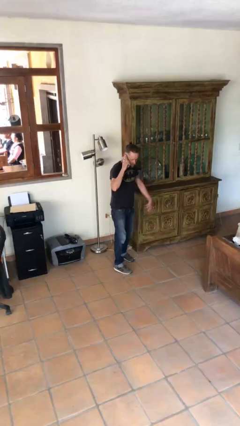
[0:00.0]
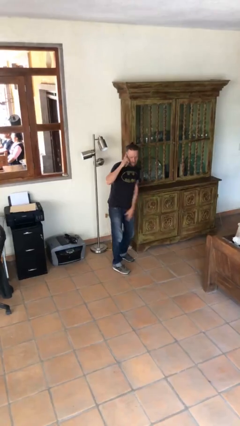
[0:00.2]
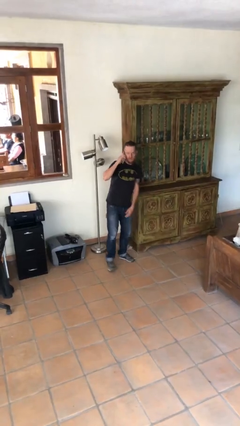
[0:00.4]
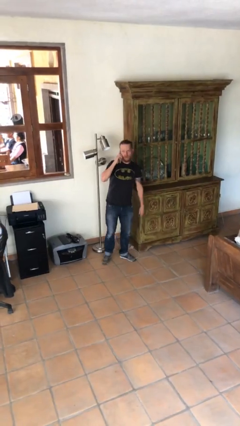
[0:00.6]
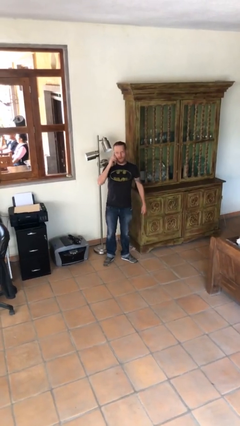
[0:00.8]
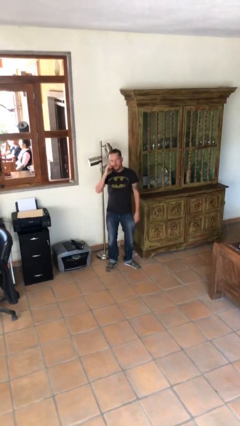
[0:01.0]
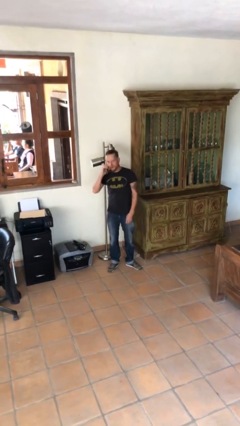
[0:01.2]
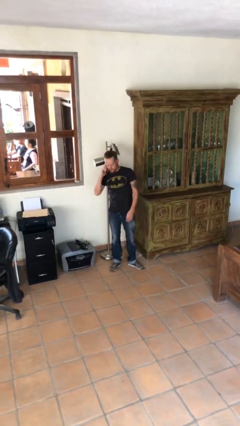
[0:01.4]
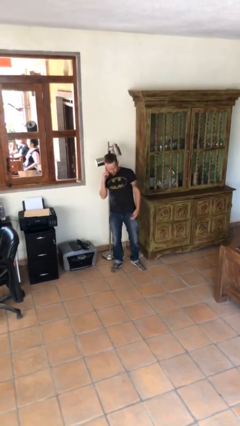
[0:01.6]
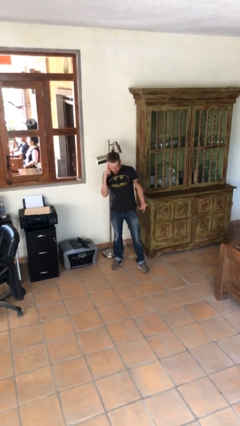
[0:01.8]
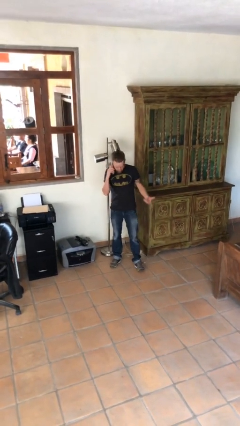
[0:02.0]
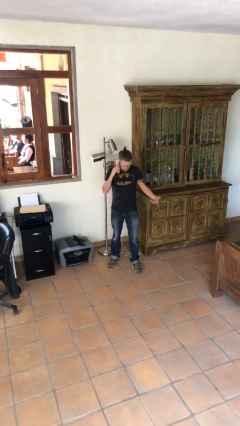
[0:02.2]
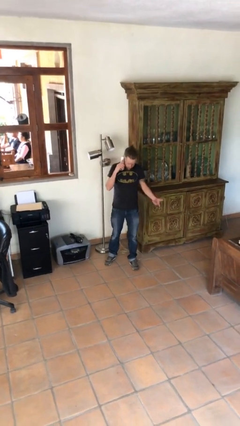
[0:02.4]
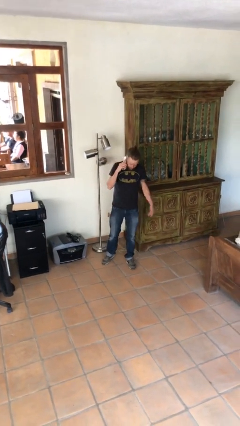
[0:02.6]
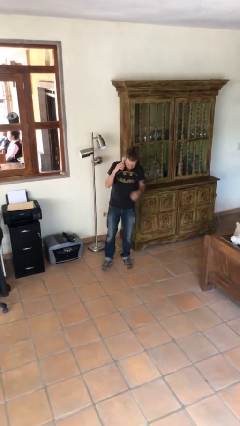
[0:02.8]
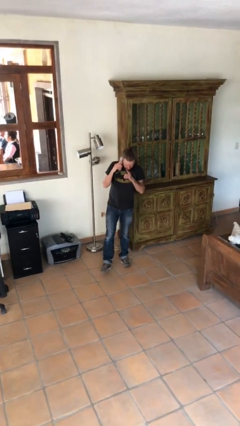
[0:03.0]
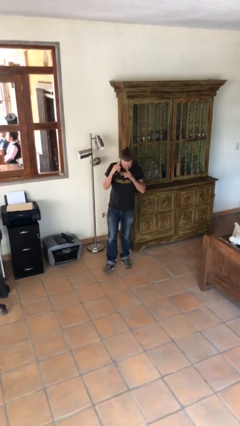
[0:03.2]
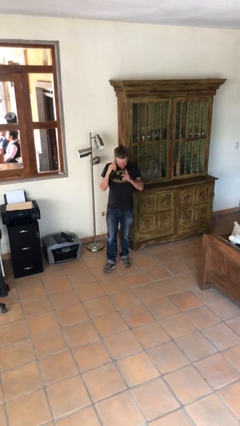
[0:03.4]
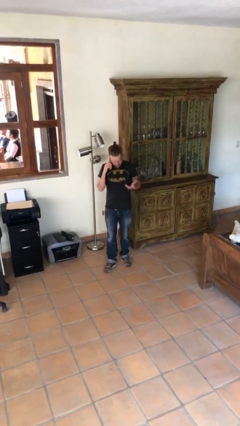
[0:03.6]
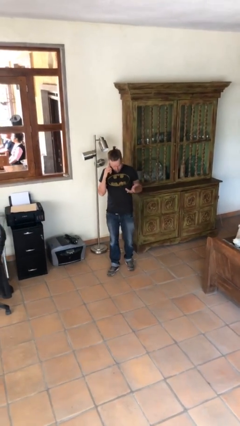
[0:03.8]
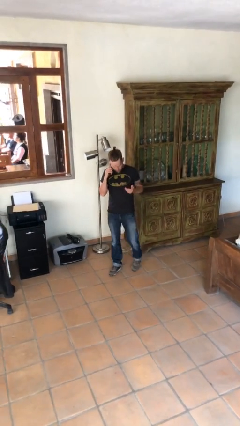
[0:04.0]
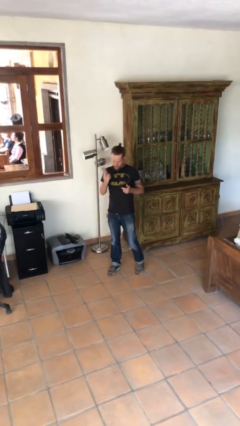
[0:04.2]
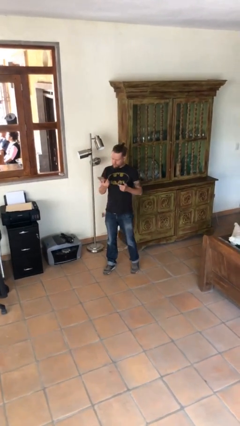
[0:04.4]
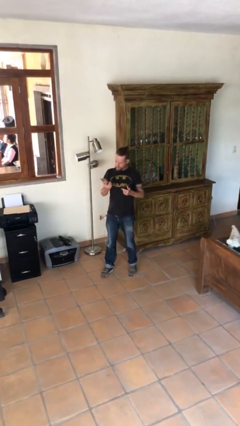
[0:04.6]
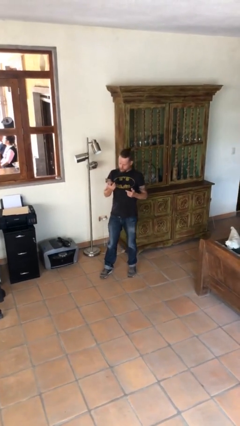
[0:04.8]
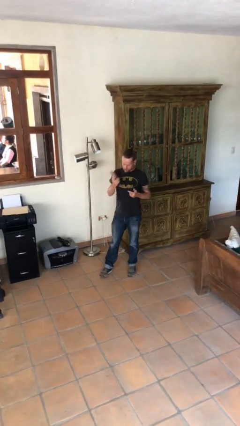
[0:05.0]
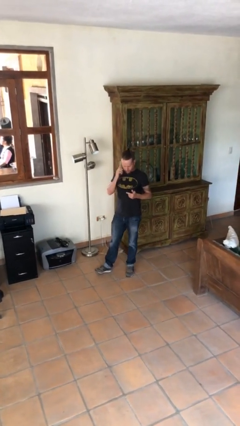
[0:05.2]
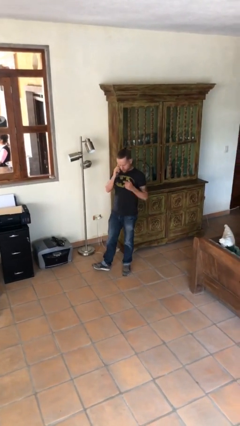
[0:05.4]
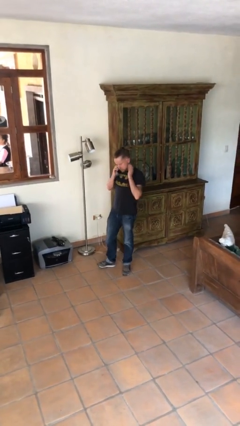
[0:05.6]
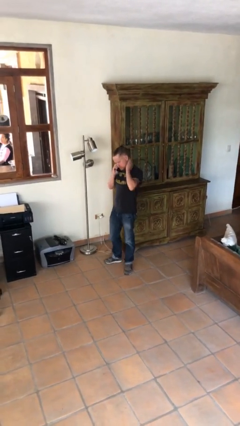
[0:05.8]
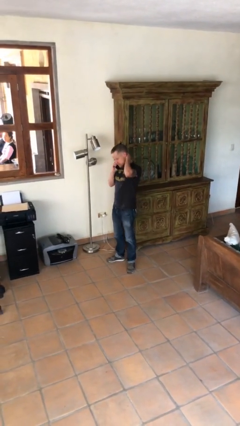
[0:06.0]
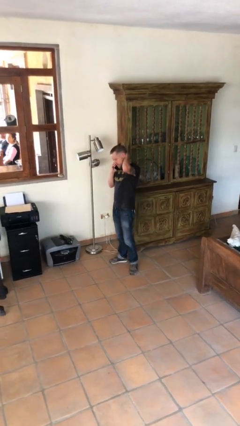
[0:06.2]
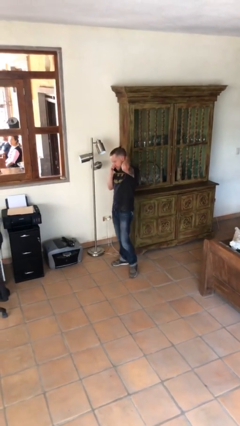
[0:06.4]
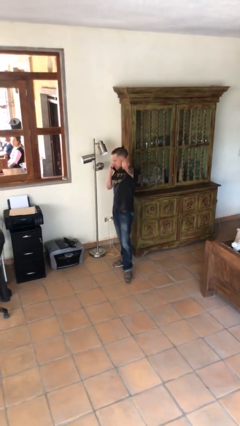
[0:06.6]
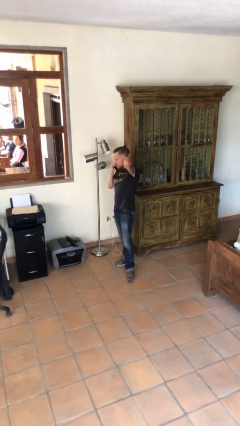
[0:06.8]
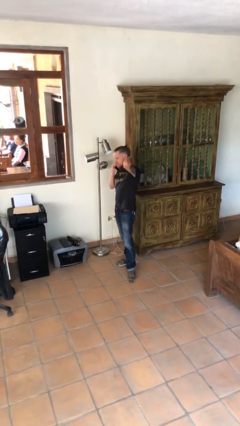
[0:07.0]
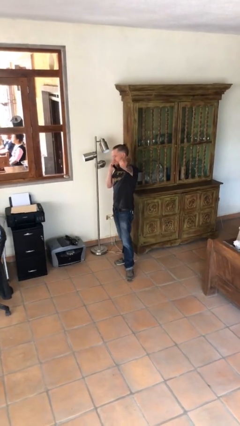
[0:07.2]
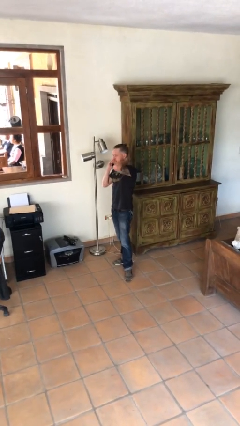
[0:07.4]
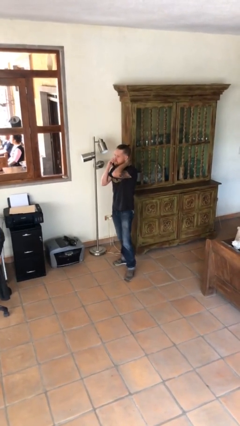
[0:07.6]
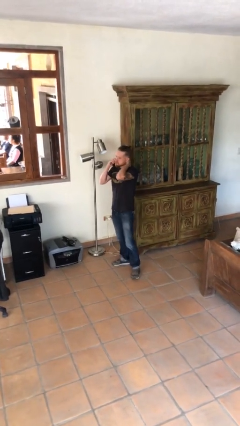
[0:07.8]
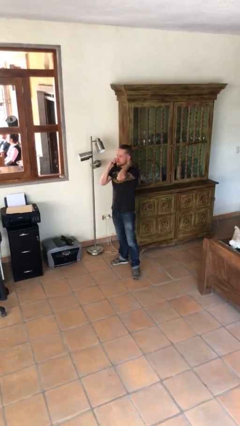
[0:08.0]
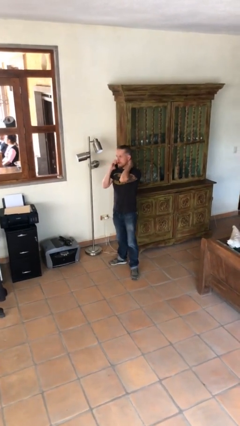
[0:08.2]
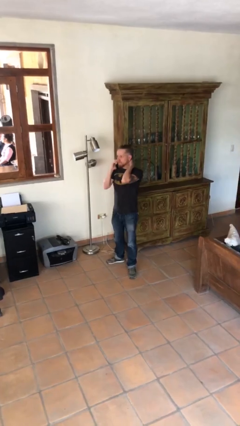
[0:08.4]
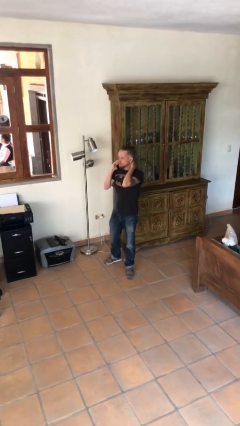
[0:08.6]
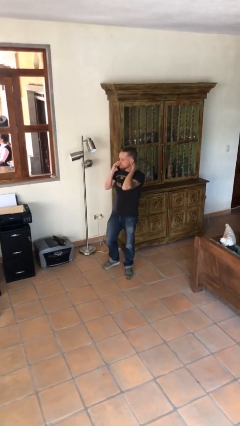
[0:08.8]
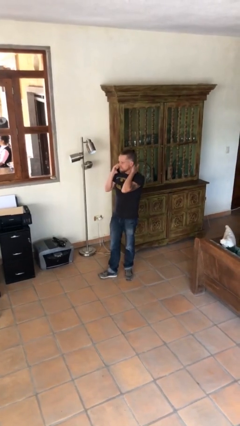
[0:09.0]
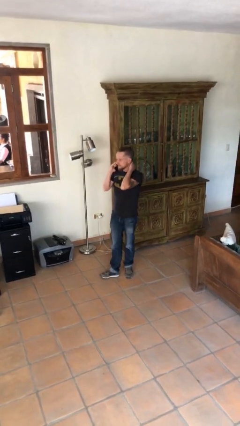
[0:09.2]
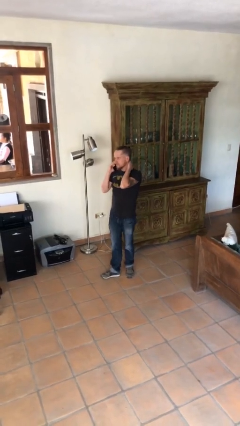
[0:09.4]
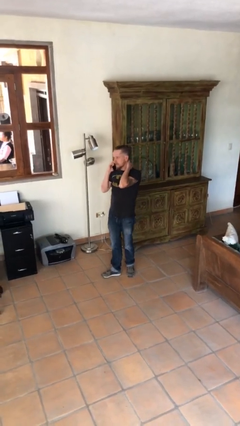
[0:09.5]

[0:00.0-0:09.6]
person talks on phone

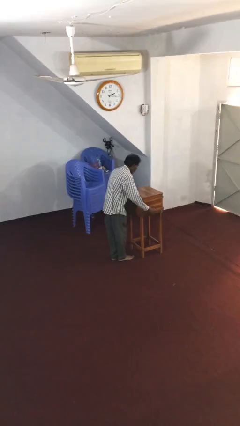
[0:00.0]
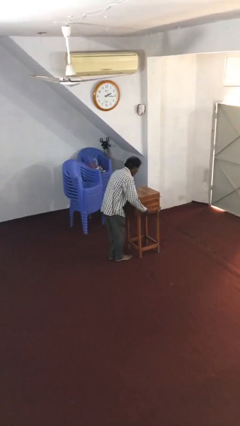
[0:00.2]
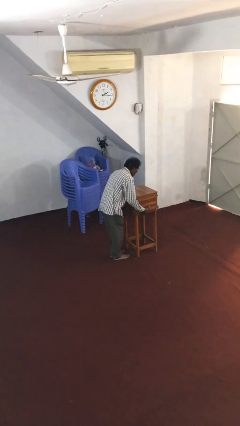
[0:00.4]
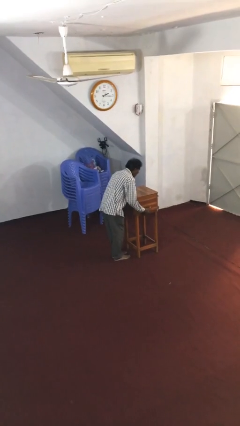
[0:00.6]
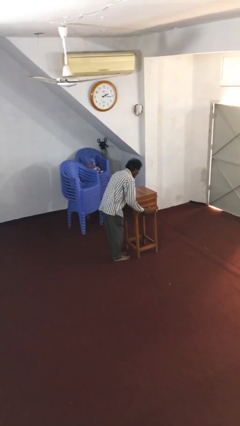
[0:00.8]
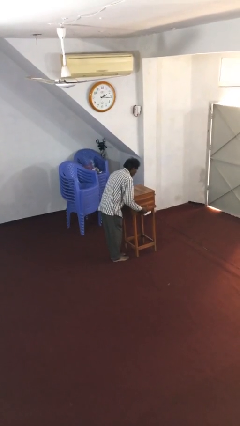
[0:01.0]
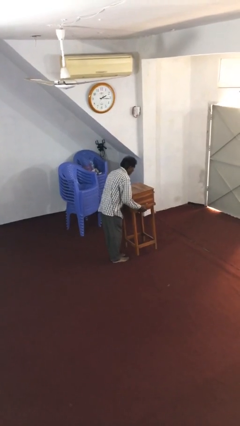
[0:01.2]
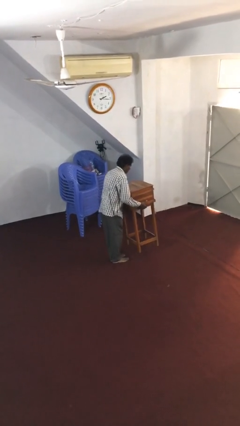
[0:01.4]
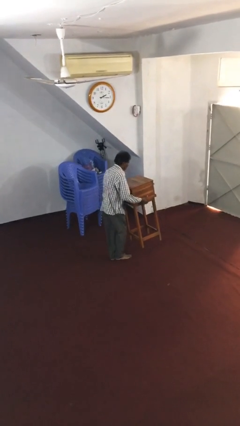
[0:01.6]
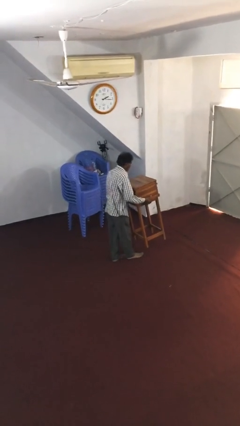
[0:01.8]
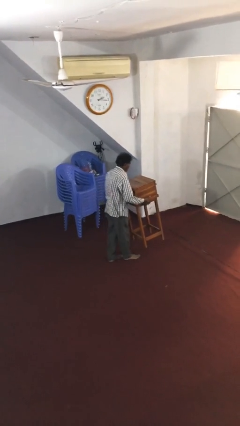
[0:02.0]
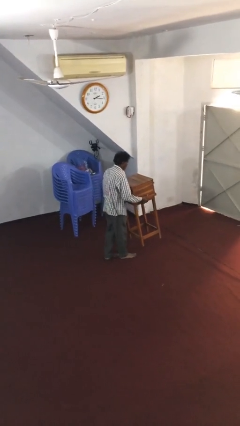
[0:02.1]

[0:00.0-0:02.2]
person picks up object from floor

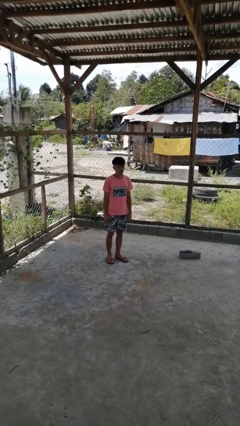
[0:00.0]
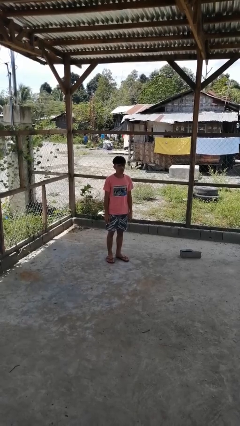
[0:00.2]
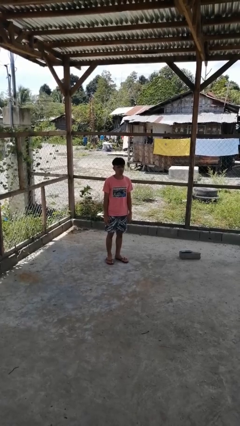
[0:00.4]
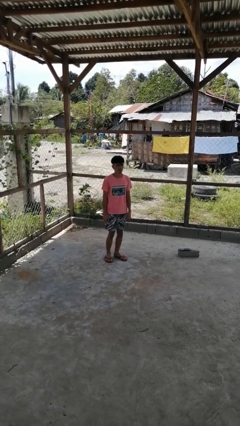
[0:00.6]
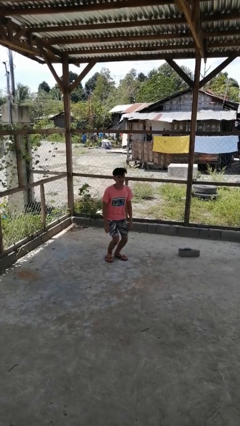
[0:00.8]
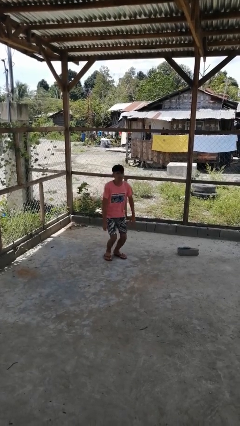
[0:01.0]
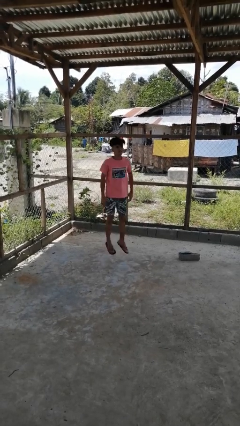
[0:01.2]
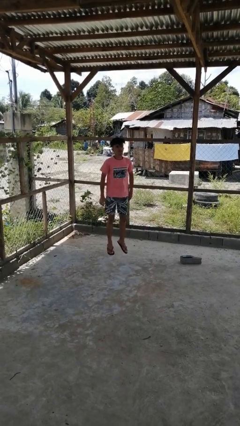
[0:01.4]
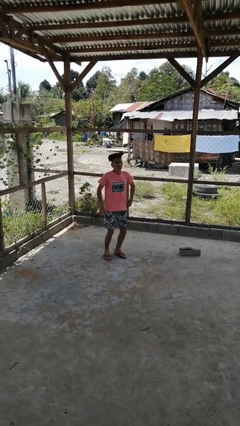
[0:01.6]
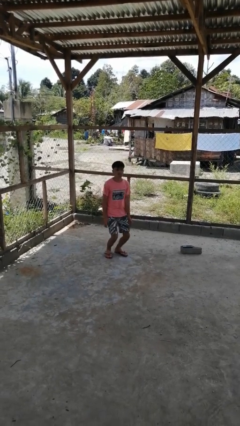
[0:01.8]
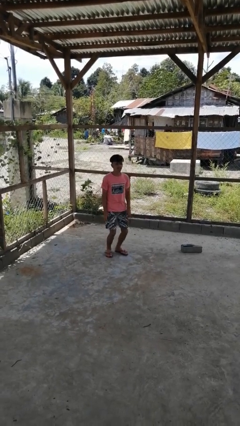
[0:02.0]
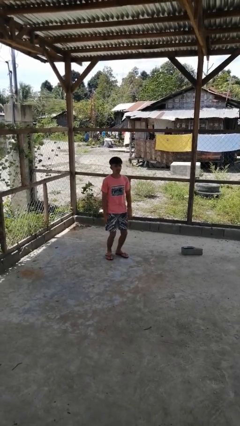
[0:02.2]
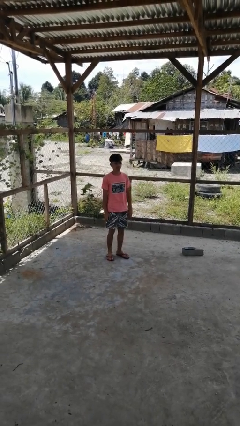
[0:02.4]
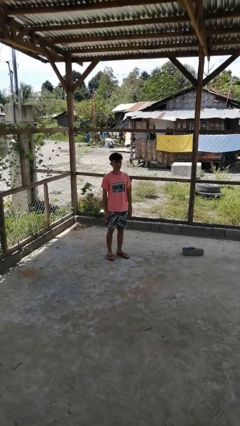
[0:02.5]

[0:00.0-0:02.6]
person jumps

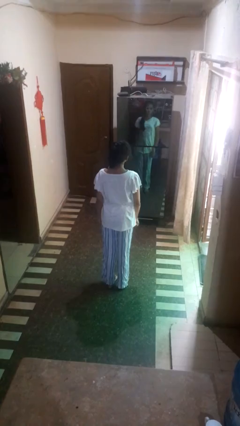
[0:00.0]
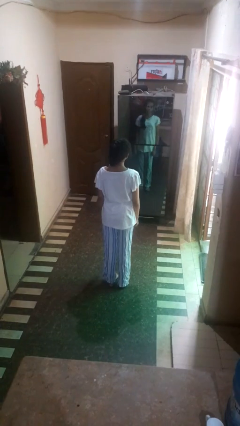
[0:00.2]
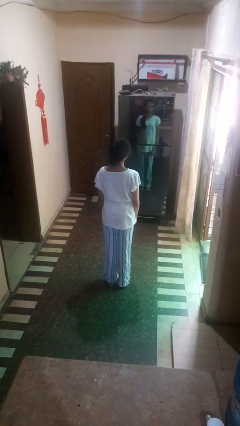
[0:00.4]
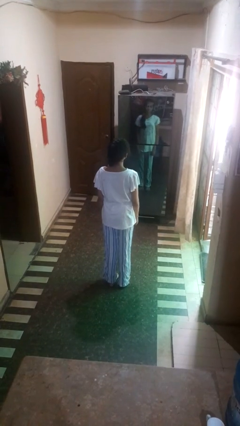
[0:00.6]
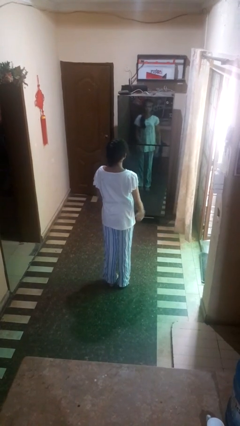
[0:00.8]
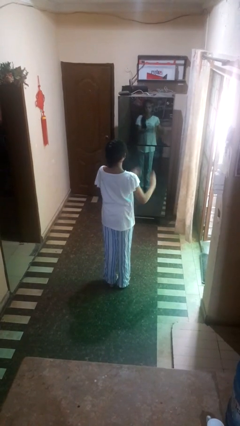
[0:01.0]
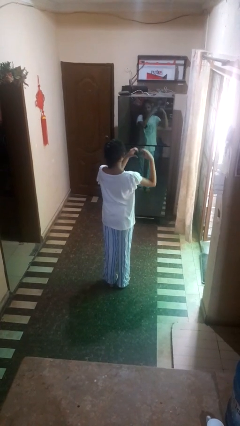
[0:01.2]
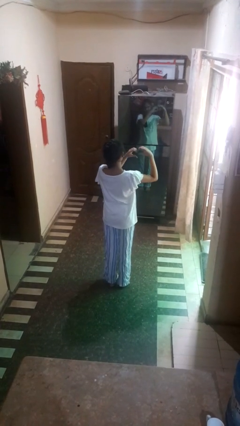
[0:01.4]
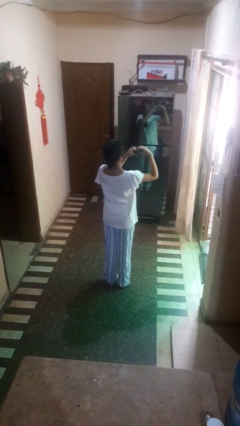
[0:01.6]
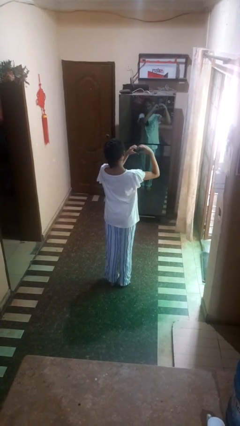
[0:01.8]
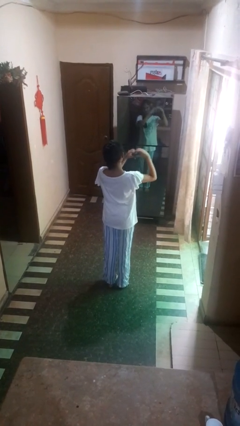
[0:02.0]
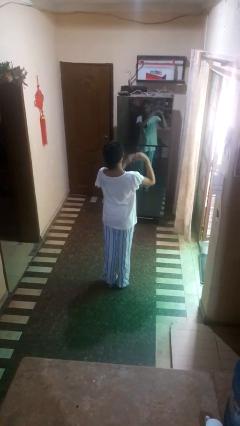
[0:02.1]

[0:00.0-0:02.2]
person gestures heart

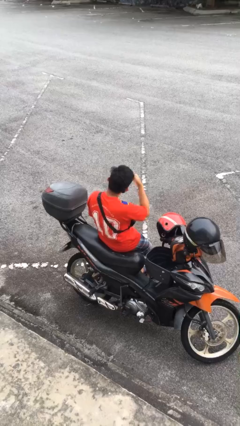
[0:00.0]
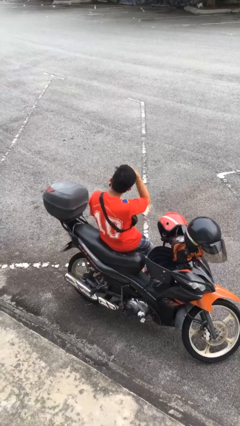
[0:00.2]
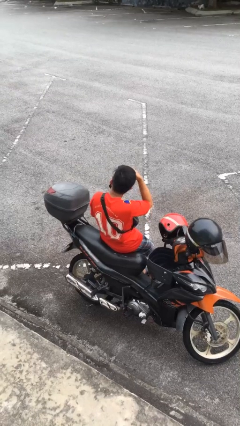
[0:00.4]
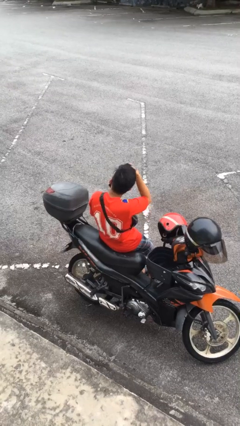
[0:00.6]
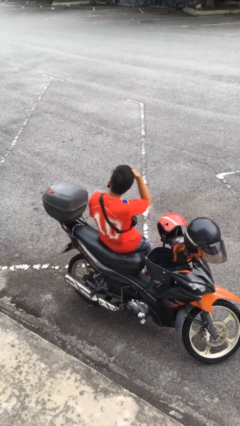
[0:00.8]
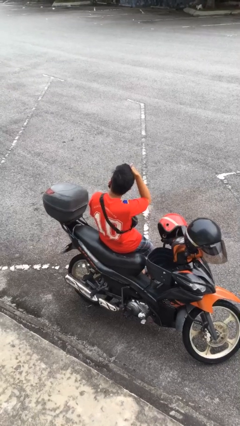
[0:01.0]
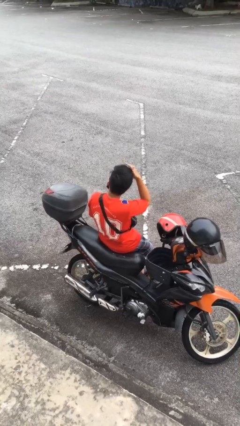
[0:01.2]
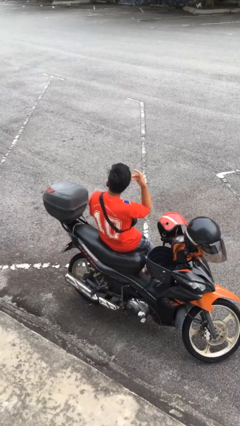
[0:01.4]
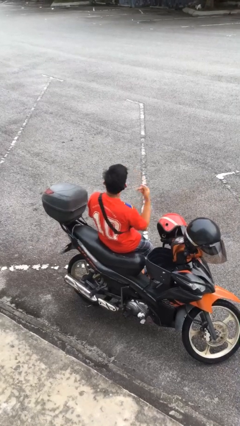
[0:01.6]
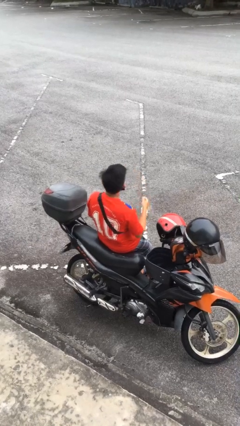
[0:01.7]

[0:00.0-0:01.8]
person scratches face
